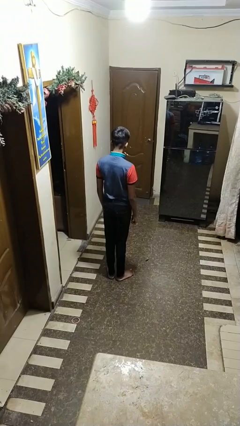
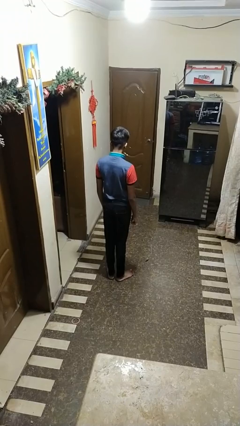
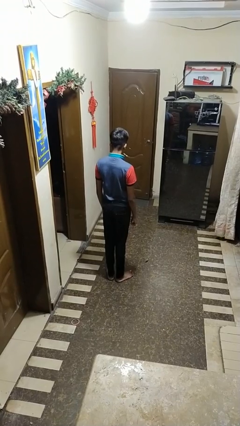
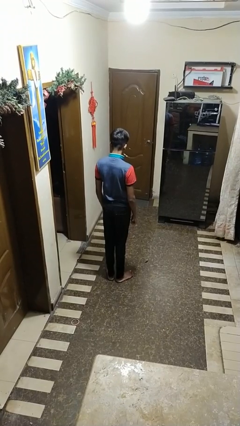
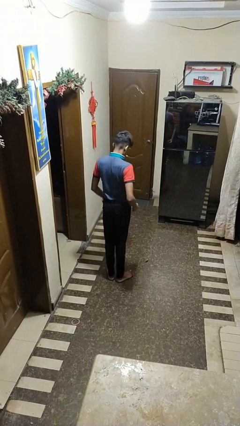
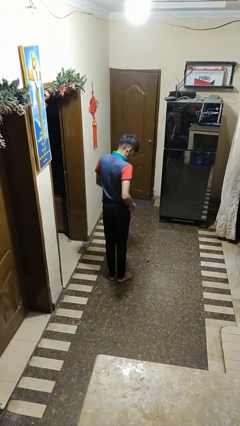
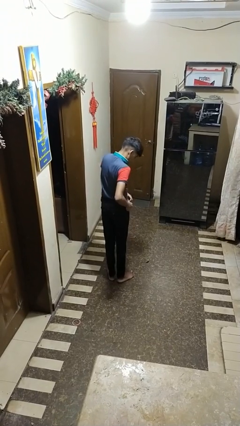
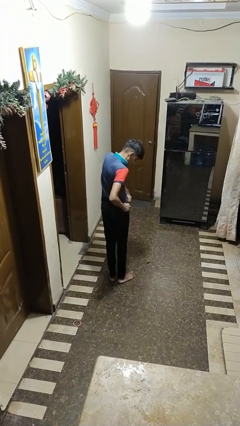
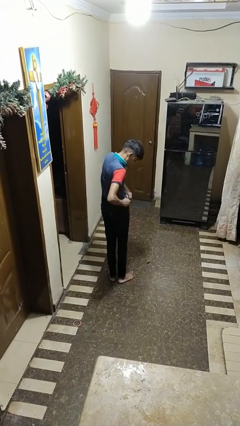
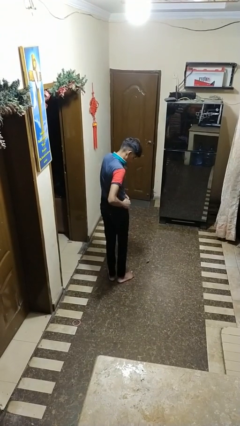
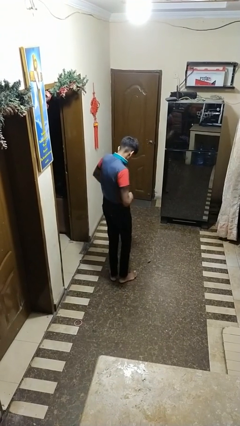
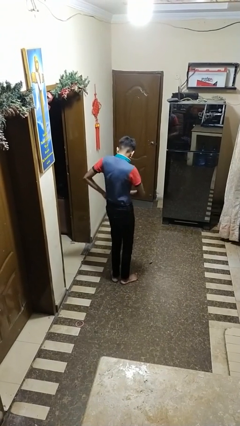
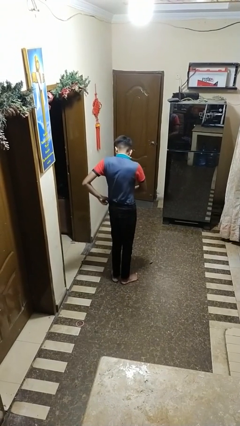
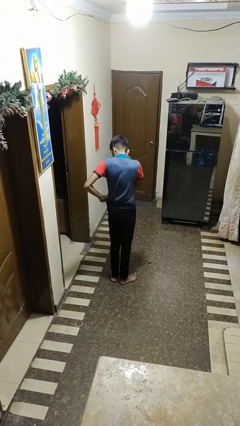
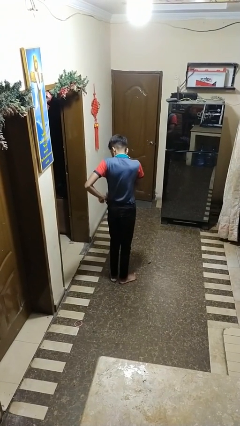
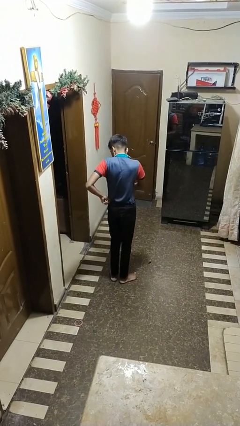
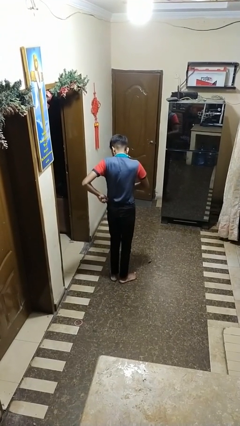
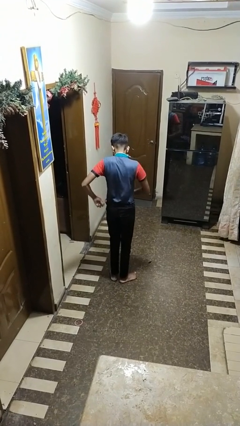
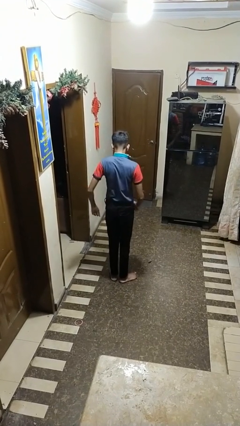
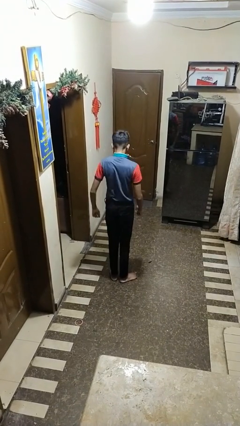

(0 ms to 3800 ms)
person hikes up pants

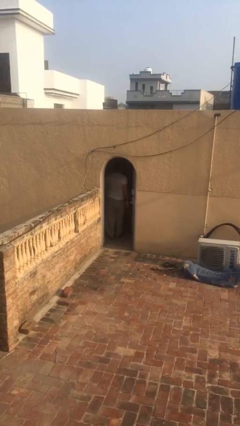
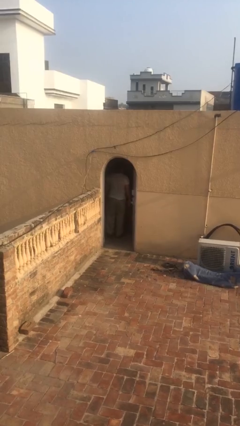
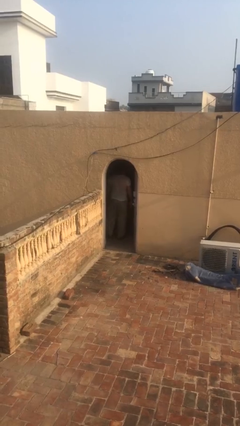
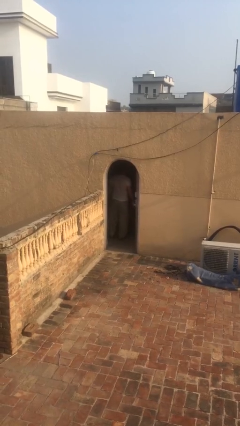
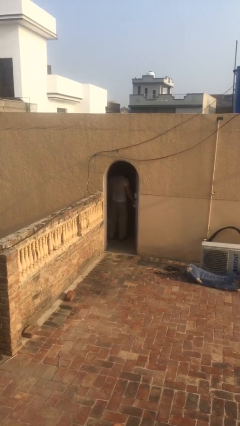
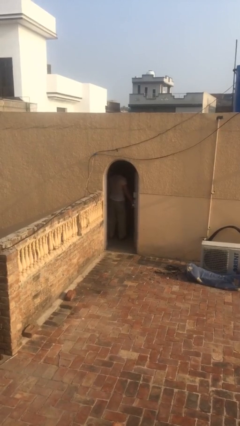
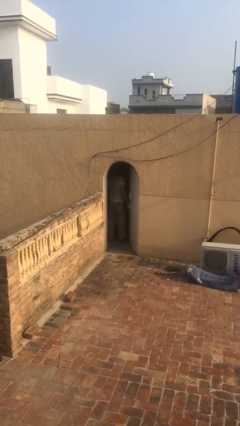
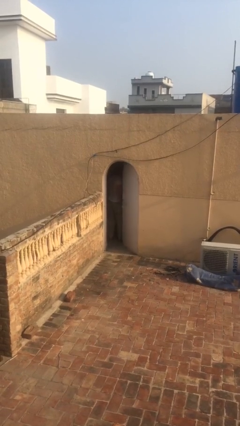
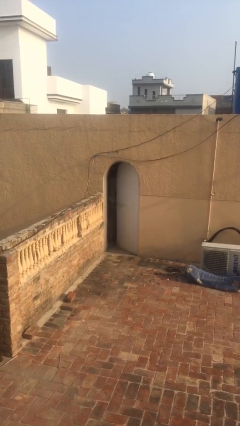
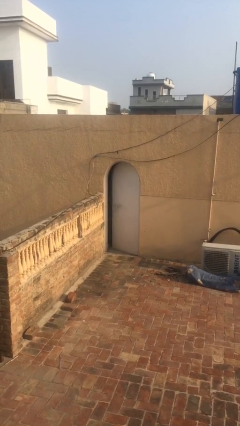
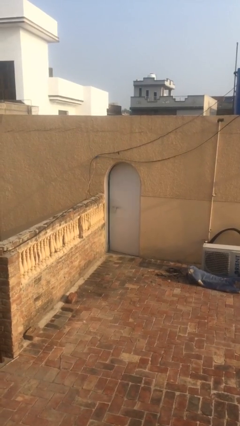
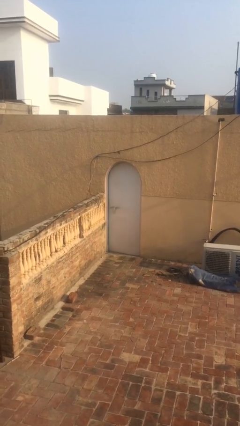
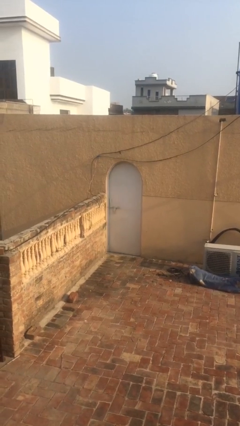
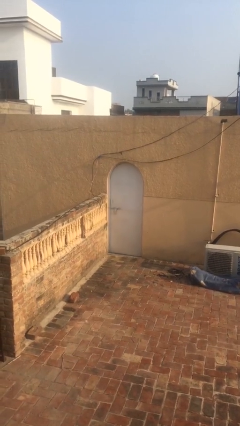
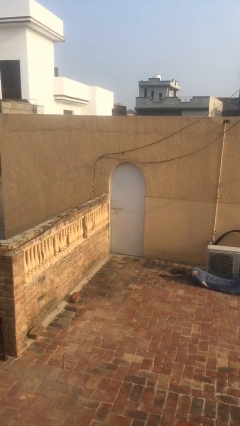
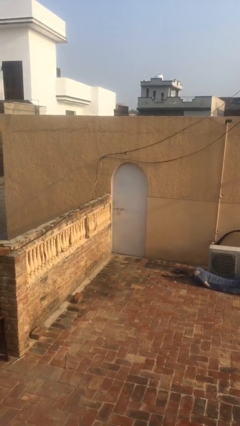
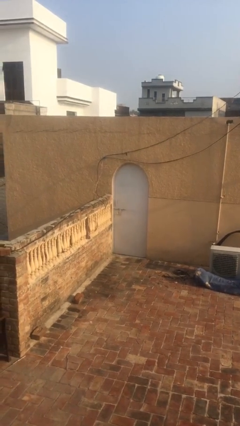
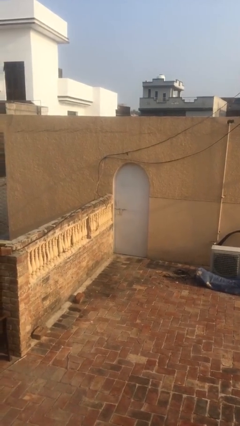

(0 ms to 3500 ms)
person closes facility door

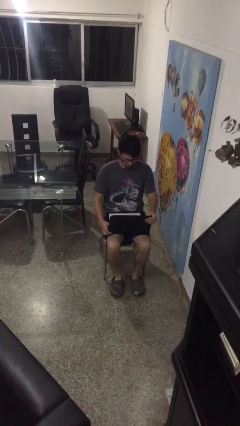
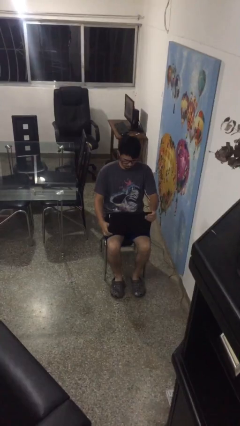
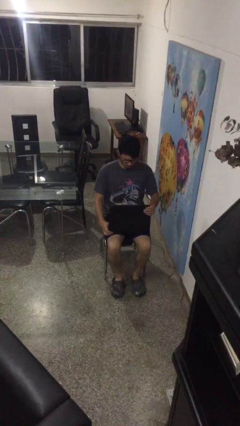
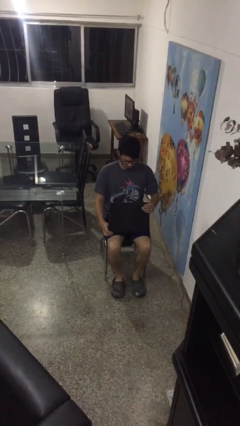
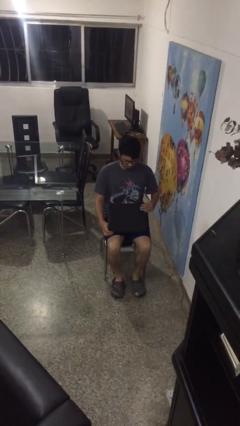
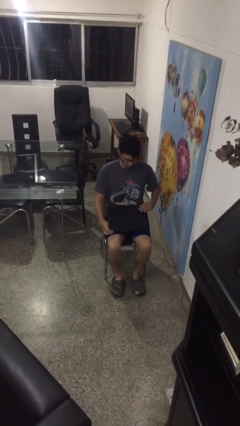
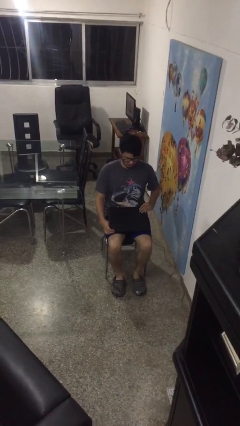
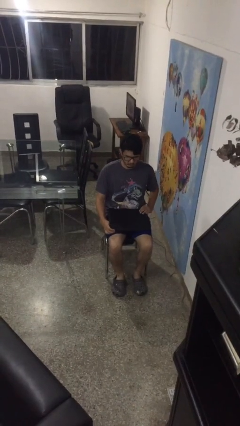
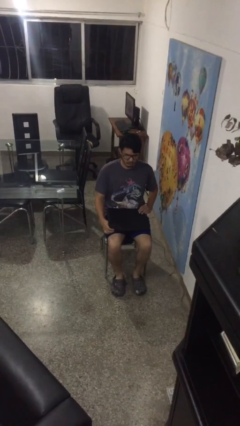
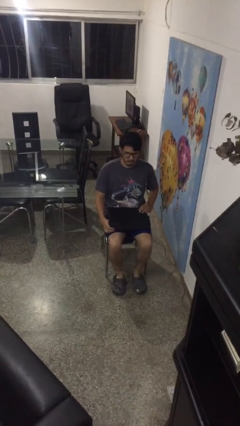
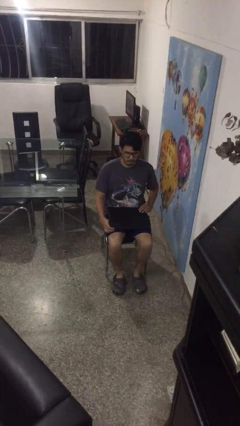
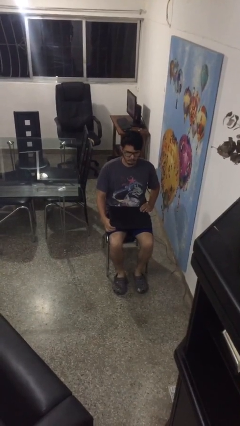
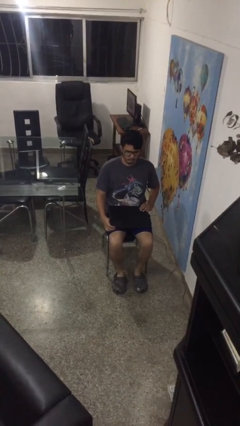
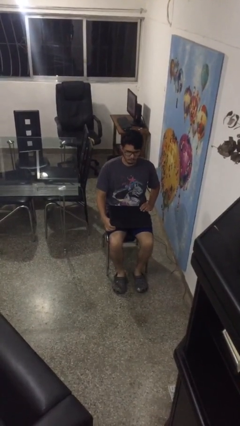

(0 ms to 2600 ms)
person closes laptop

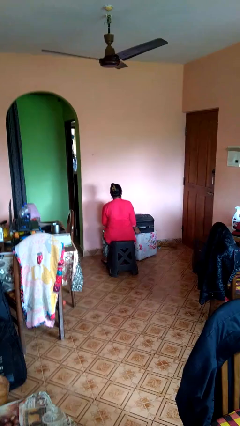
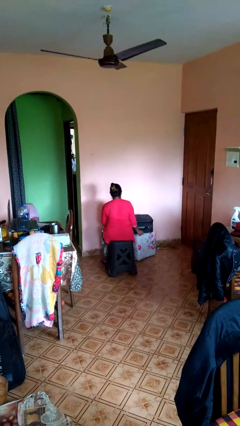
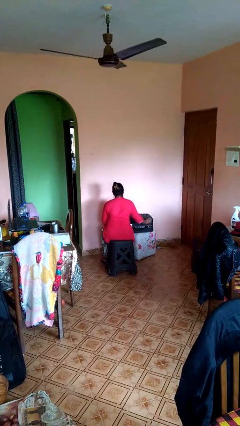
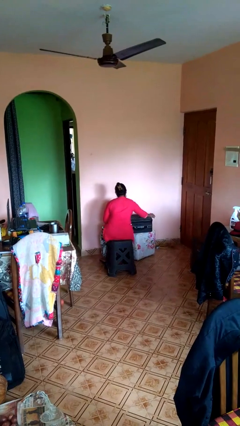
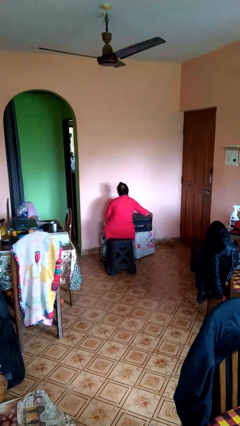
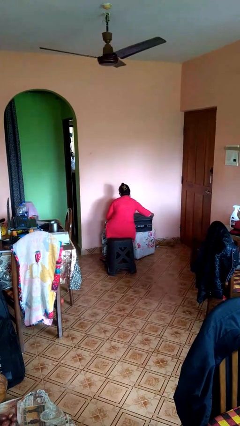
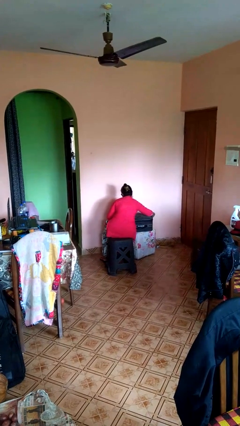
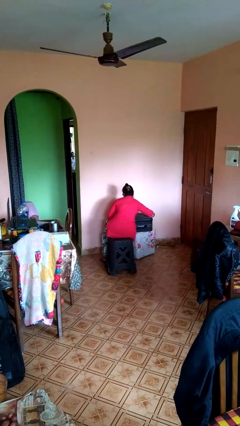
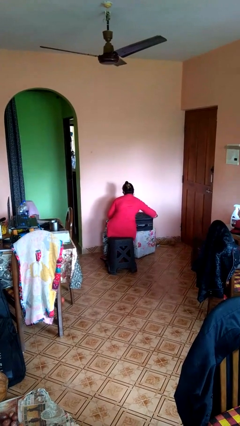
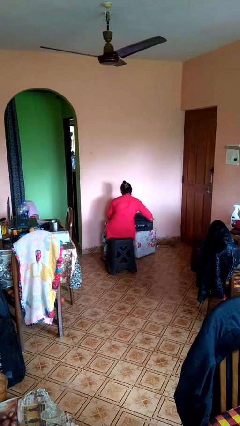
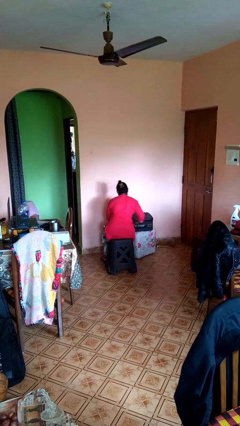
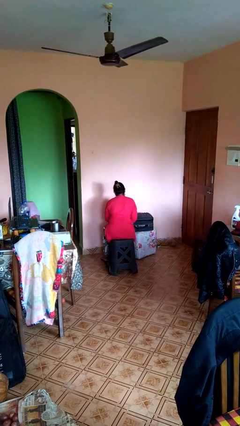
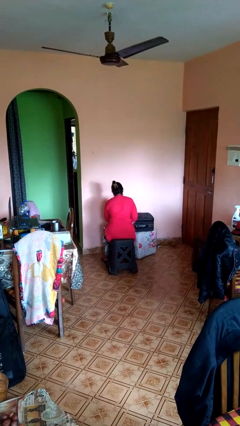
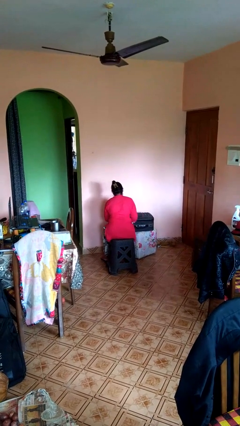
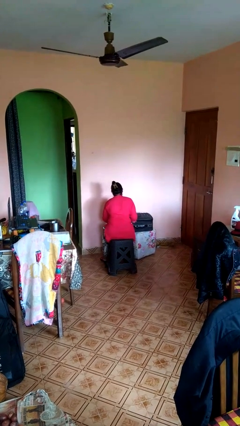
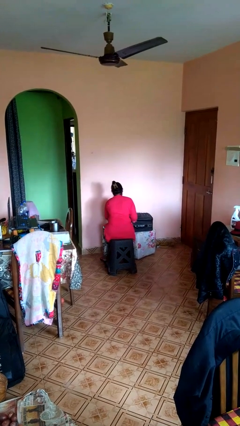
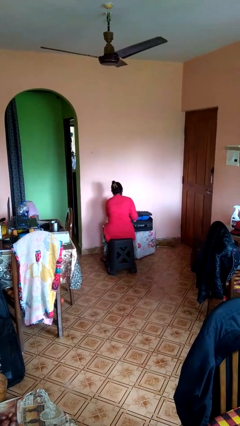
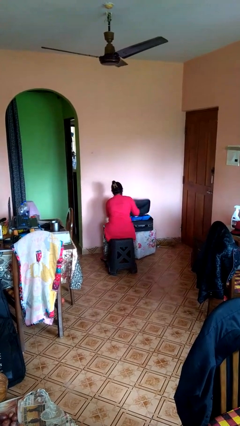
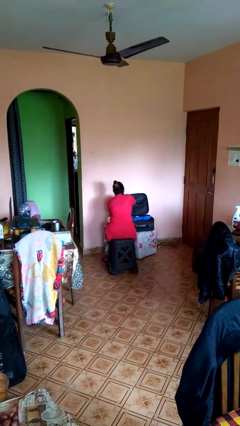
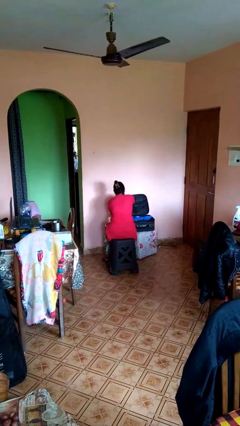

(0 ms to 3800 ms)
person opens suitcase

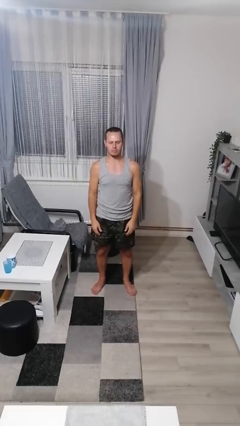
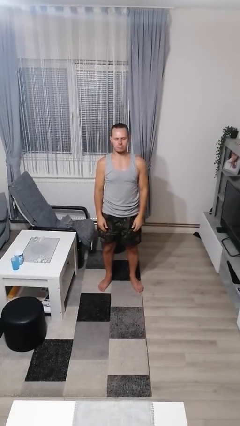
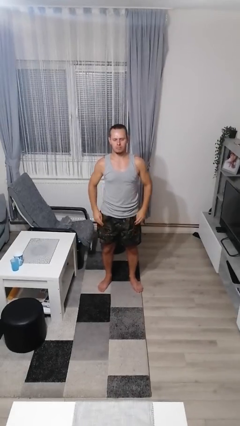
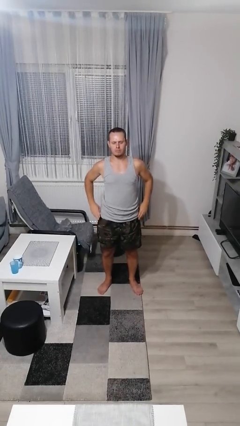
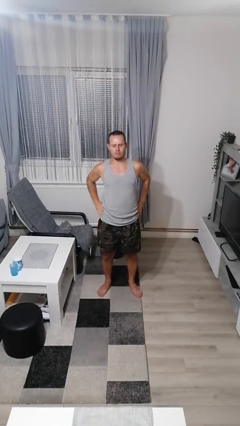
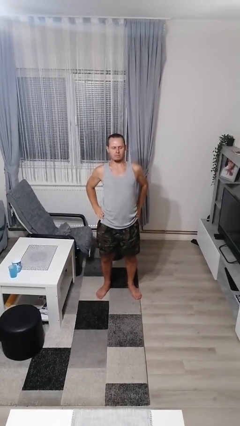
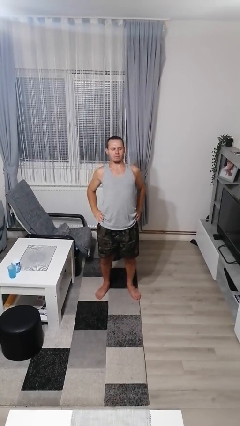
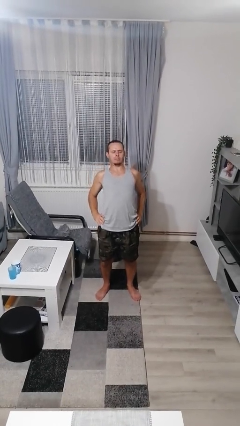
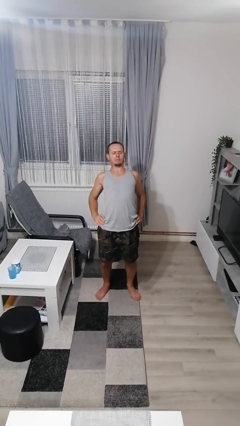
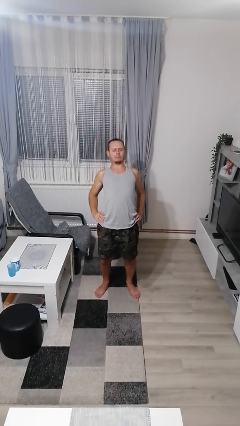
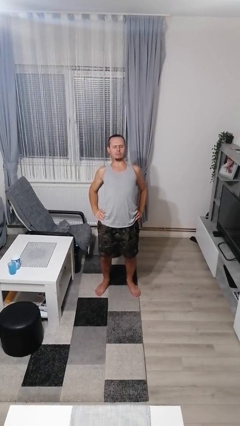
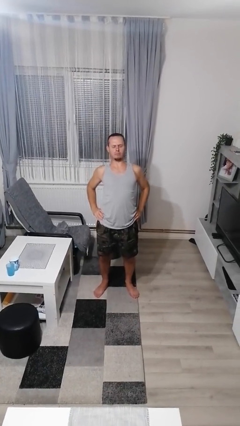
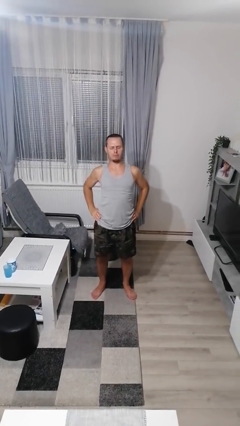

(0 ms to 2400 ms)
person stretches back

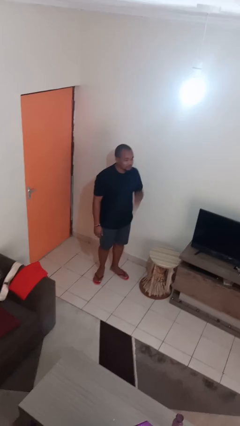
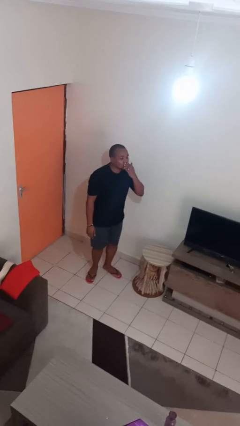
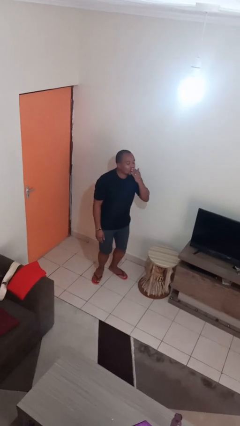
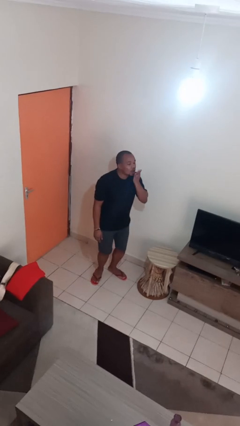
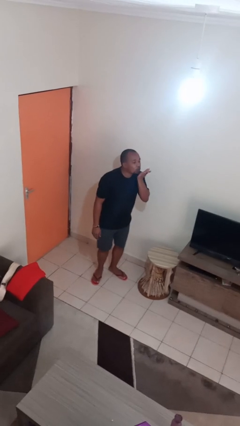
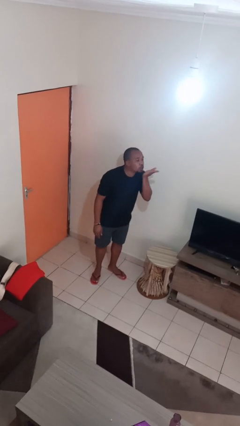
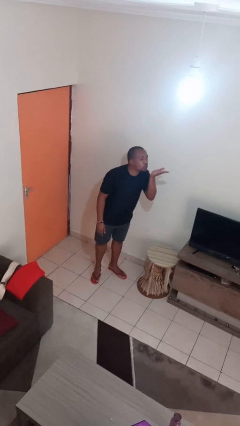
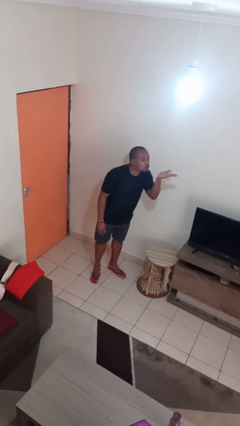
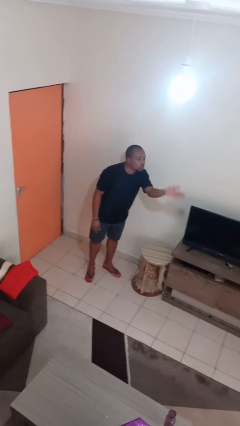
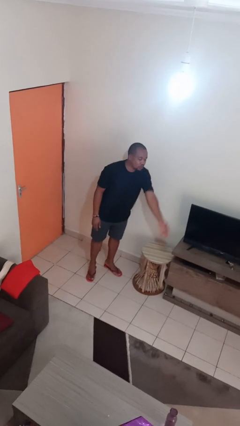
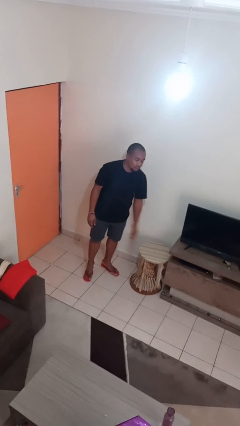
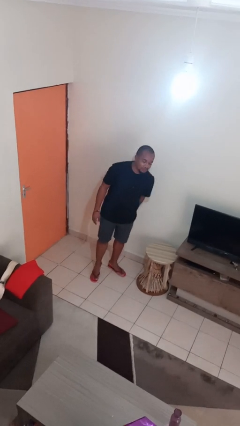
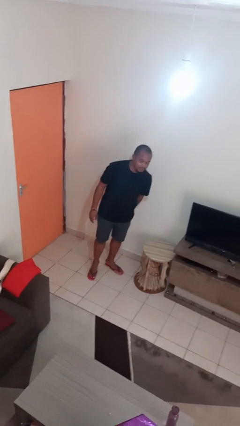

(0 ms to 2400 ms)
person gestures blow kiss
